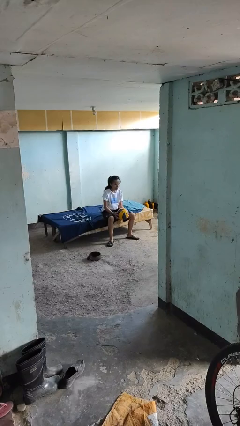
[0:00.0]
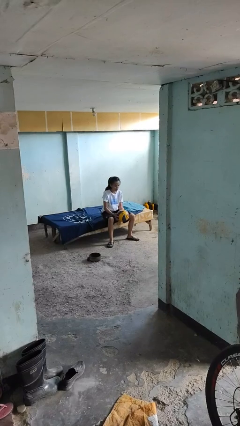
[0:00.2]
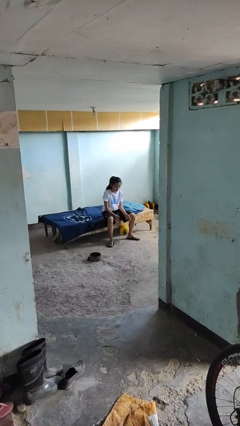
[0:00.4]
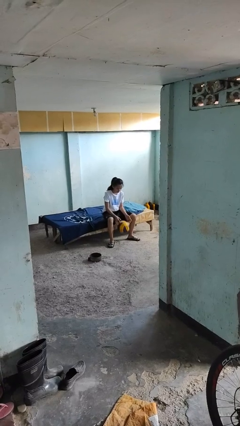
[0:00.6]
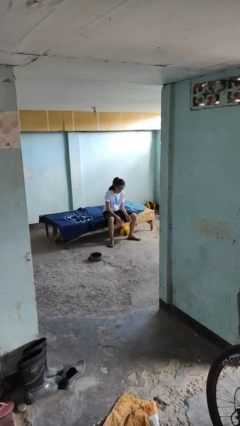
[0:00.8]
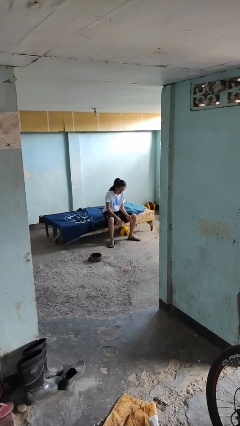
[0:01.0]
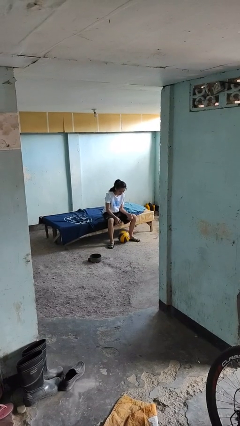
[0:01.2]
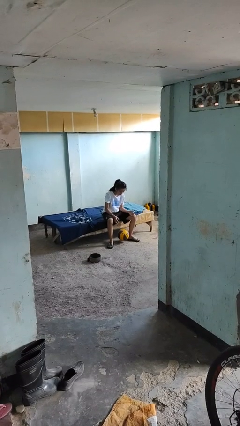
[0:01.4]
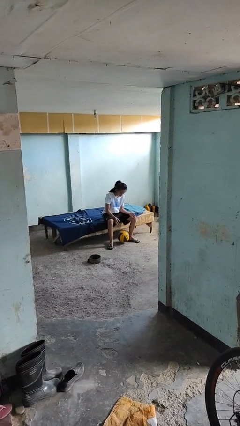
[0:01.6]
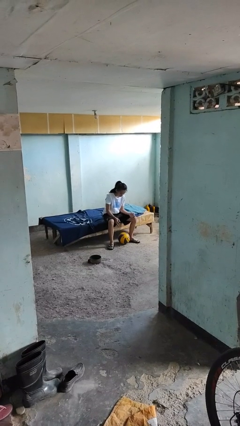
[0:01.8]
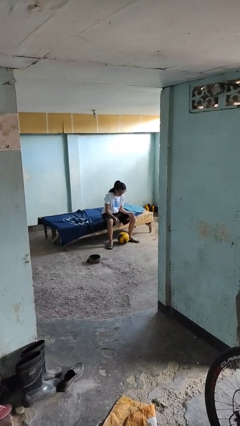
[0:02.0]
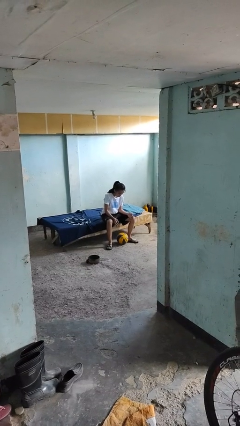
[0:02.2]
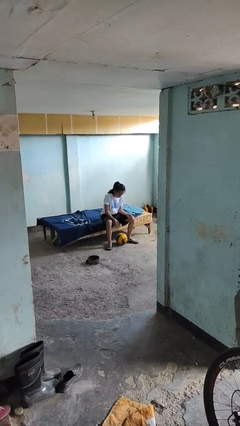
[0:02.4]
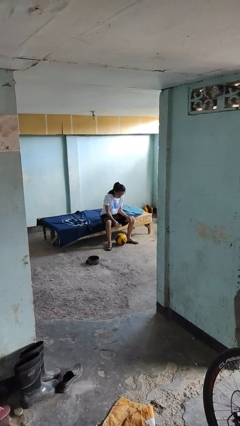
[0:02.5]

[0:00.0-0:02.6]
person drops object

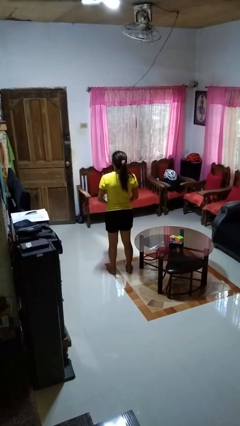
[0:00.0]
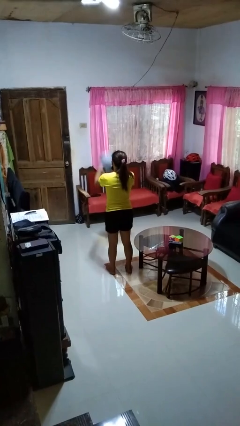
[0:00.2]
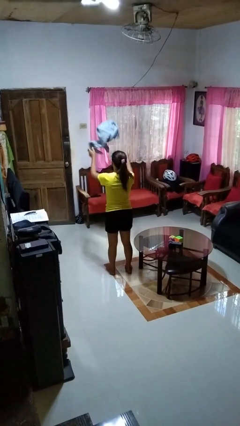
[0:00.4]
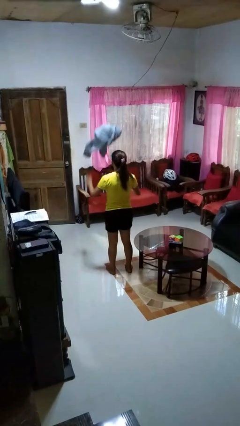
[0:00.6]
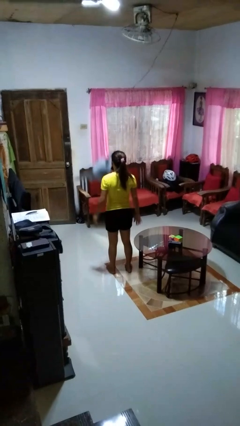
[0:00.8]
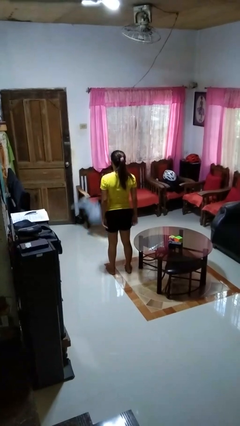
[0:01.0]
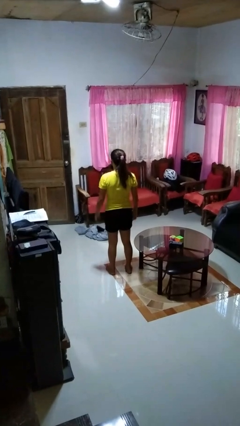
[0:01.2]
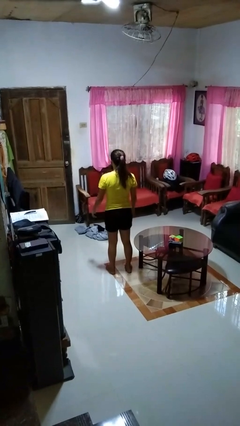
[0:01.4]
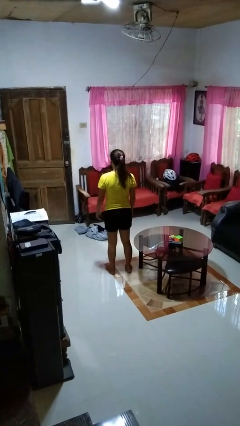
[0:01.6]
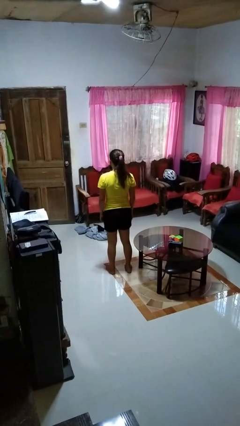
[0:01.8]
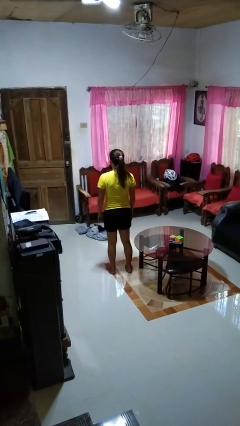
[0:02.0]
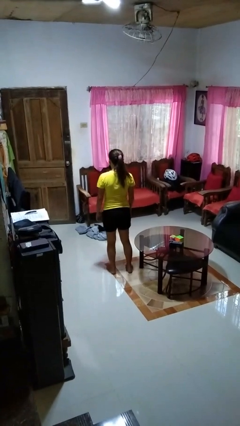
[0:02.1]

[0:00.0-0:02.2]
person throws object into air

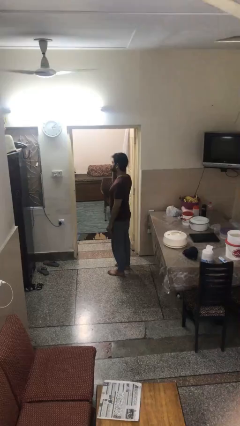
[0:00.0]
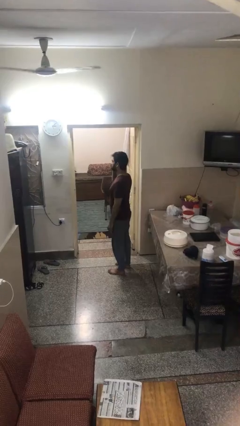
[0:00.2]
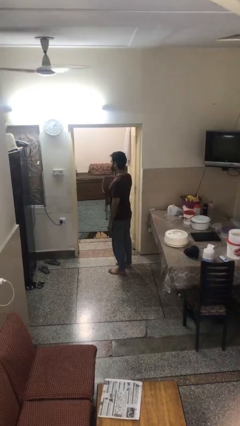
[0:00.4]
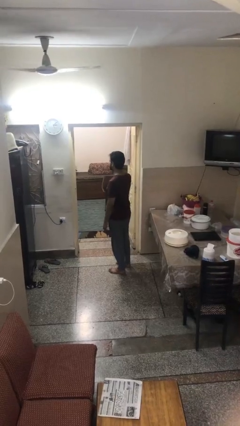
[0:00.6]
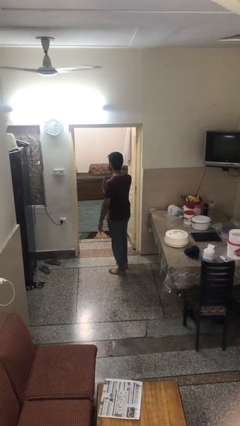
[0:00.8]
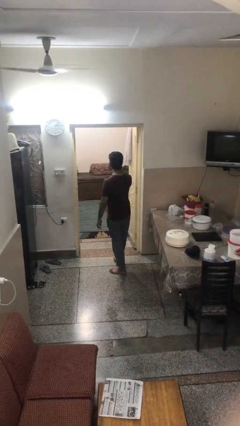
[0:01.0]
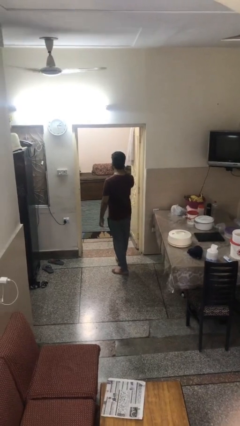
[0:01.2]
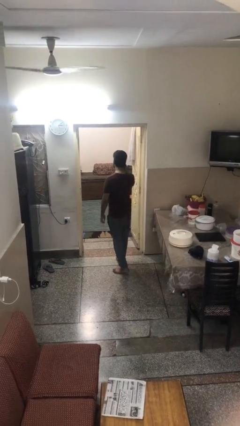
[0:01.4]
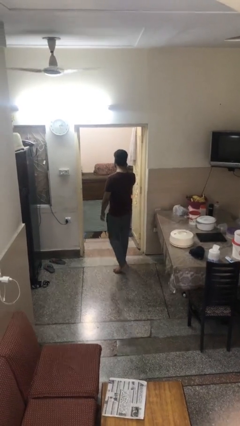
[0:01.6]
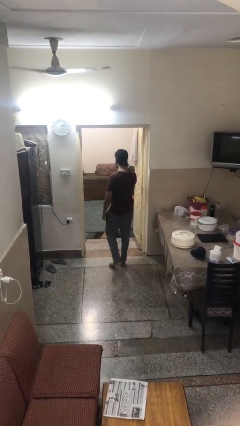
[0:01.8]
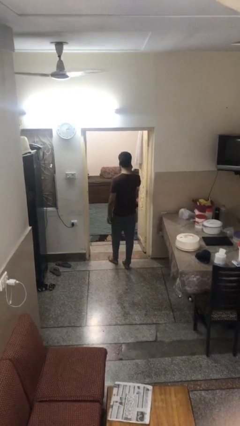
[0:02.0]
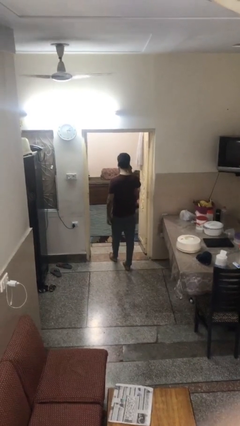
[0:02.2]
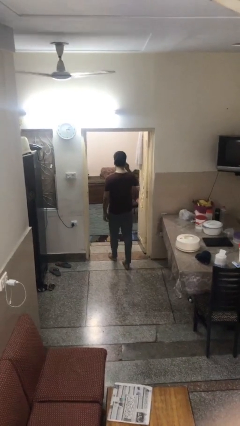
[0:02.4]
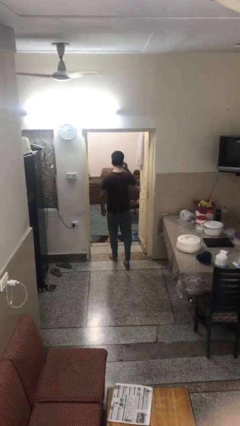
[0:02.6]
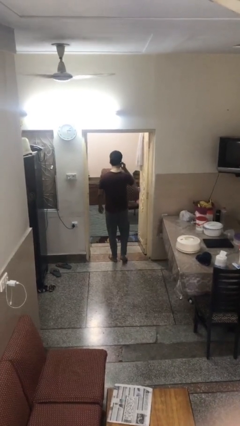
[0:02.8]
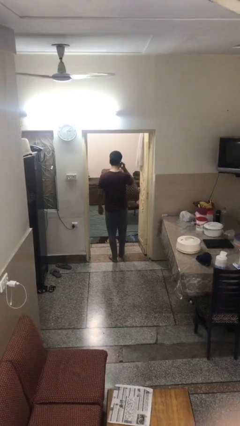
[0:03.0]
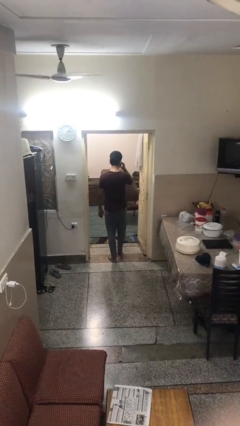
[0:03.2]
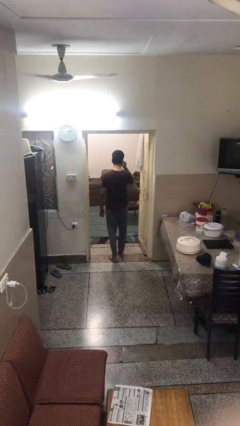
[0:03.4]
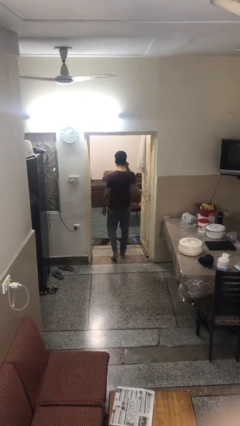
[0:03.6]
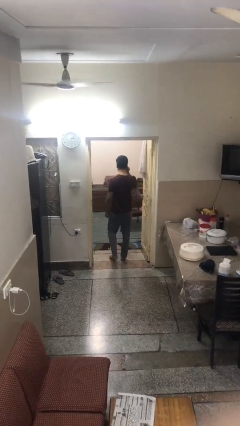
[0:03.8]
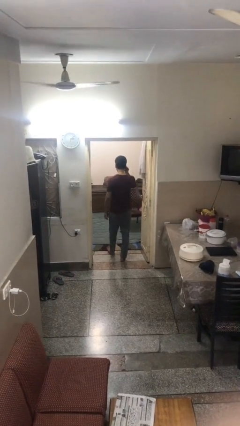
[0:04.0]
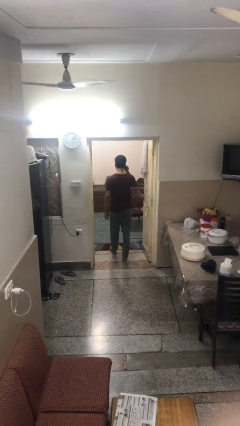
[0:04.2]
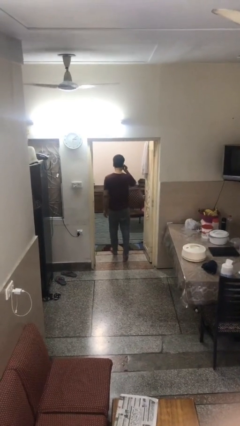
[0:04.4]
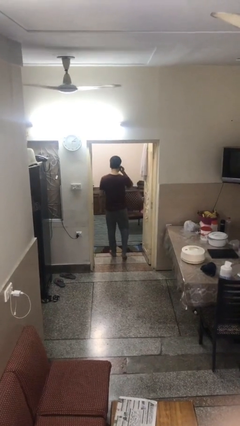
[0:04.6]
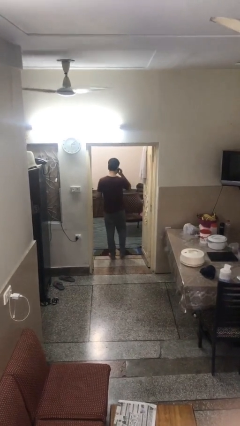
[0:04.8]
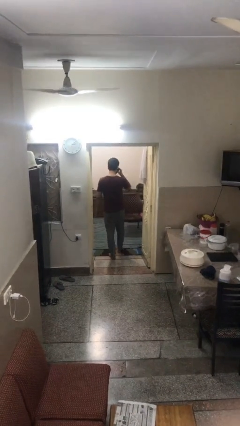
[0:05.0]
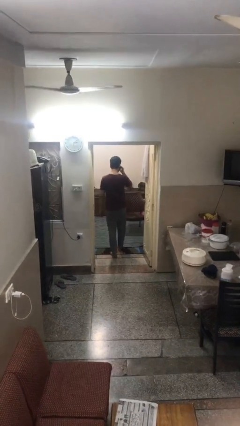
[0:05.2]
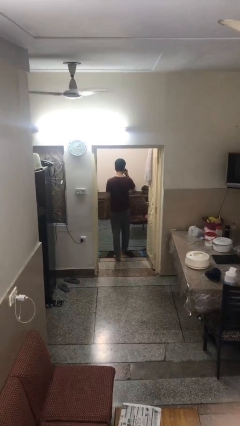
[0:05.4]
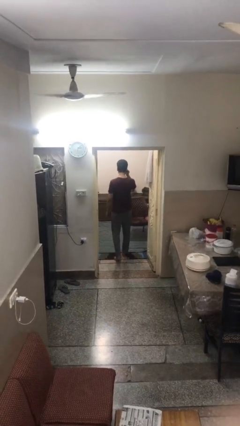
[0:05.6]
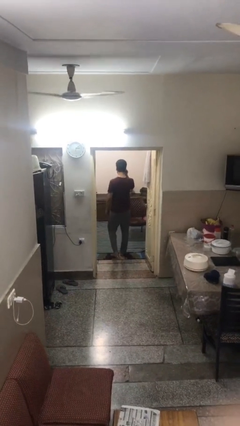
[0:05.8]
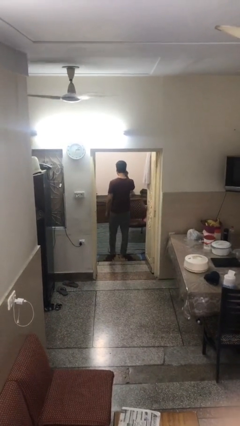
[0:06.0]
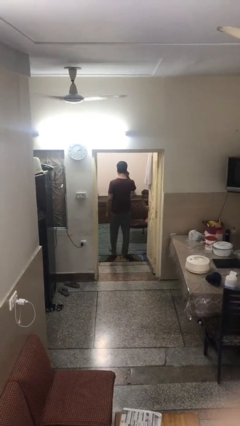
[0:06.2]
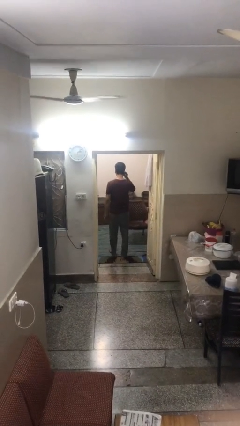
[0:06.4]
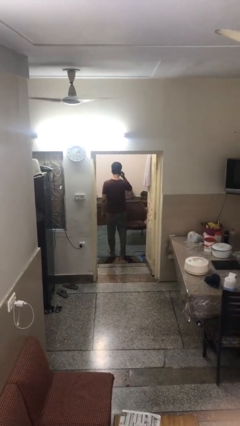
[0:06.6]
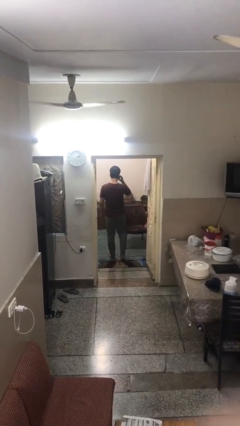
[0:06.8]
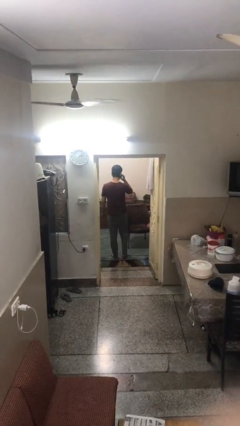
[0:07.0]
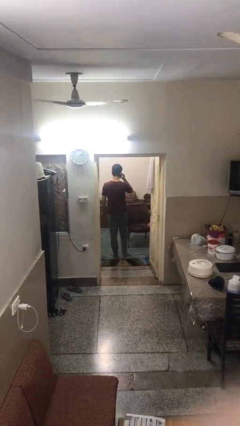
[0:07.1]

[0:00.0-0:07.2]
person exits scene through structure

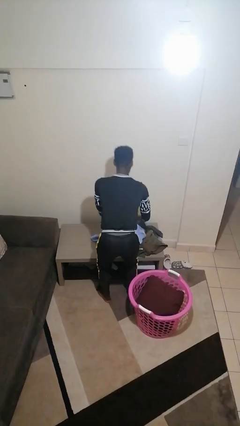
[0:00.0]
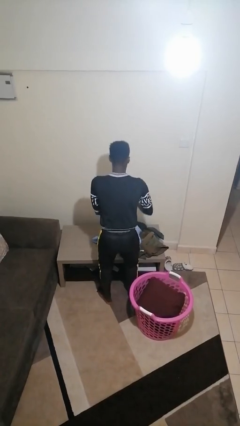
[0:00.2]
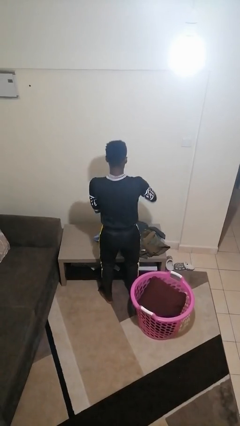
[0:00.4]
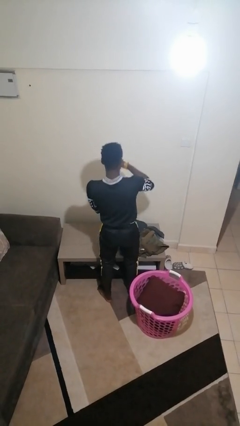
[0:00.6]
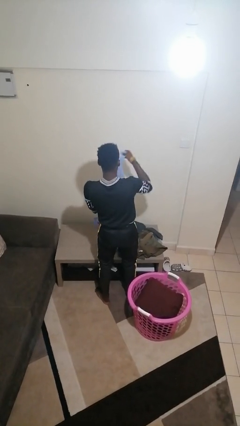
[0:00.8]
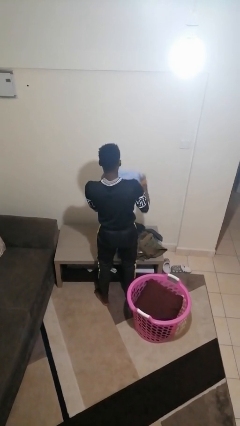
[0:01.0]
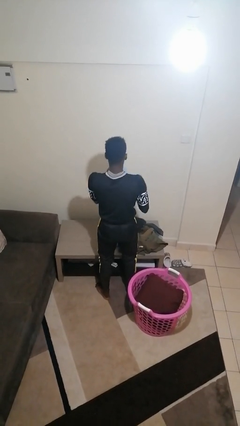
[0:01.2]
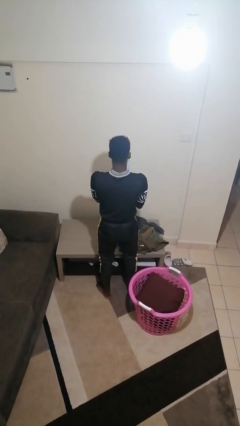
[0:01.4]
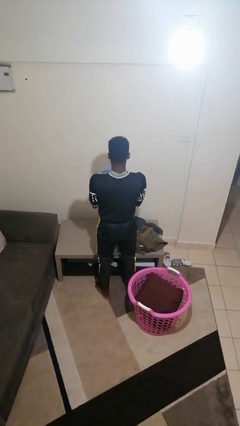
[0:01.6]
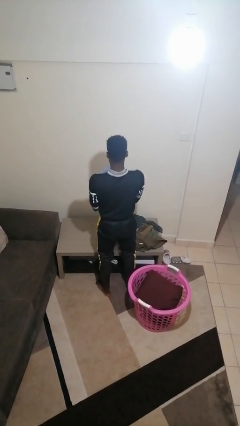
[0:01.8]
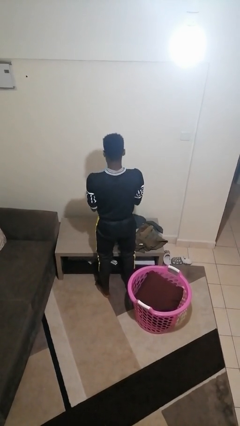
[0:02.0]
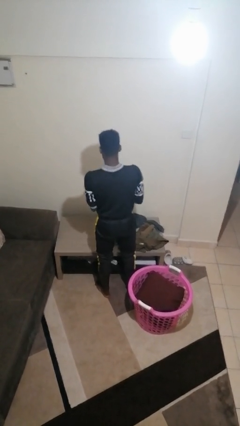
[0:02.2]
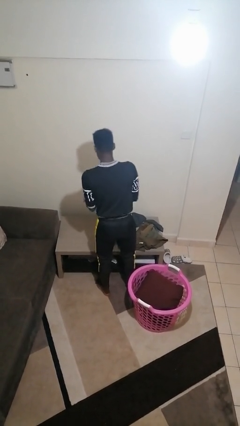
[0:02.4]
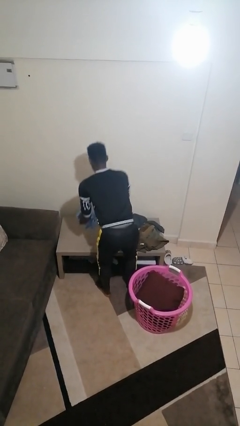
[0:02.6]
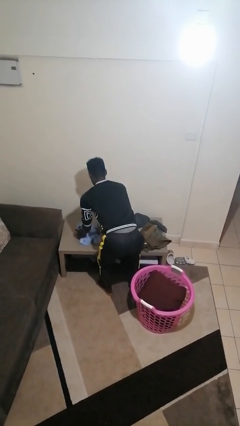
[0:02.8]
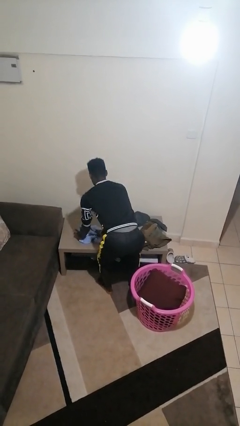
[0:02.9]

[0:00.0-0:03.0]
person folds shirt

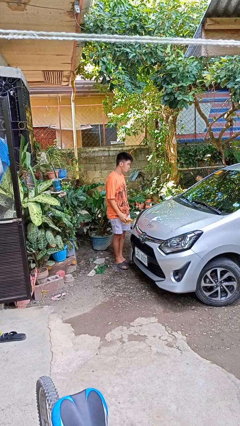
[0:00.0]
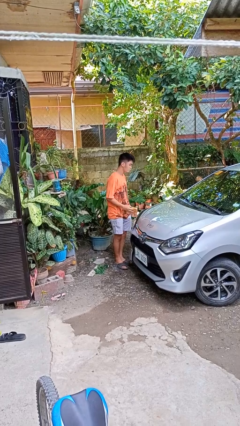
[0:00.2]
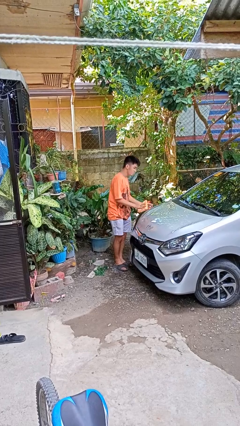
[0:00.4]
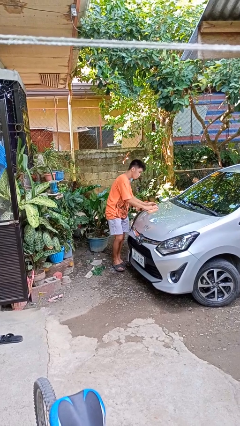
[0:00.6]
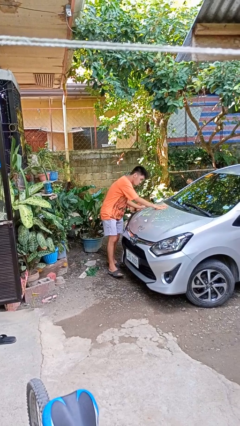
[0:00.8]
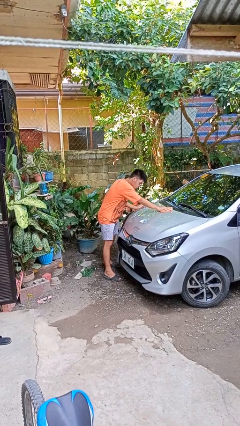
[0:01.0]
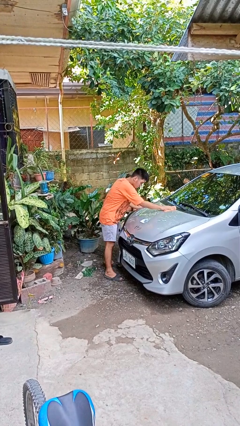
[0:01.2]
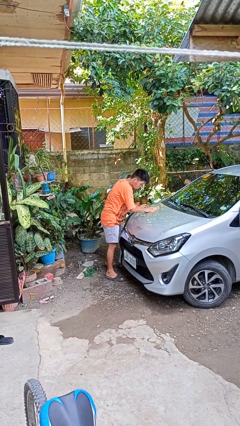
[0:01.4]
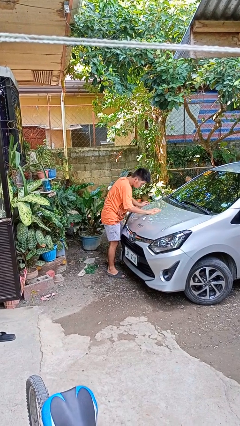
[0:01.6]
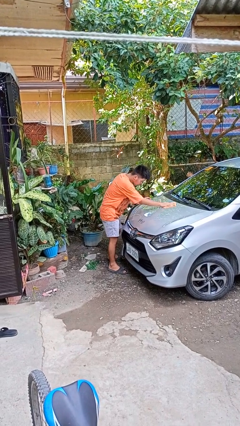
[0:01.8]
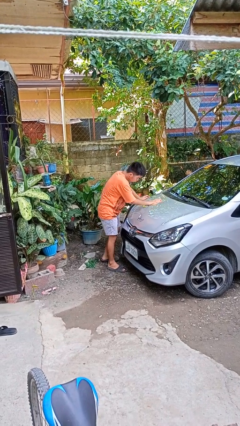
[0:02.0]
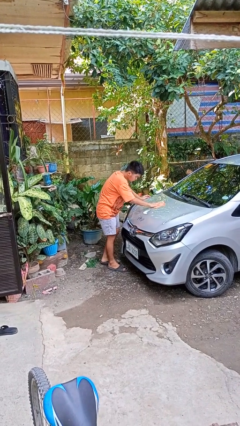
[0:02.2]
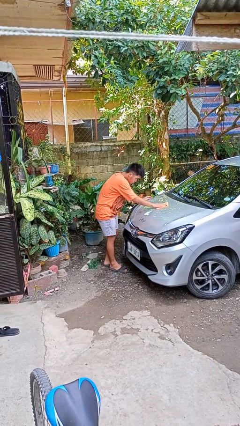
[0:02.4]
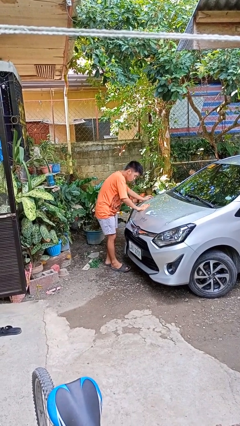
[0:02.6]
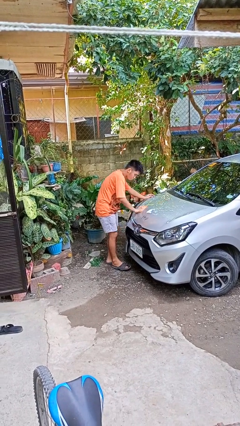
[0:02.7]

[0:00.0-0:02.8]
person polishes car with rag
